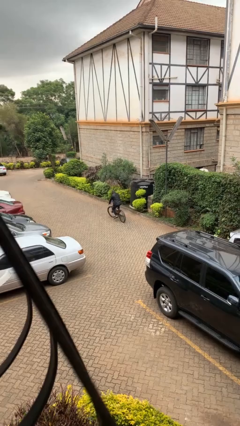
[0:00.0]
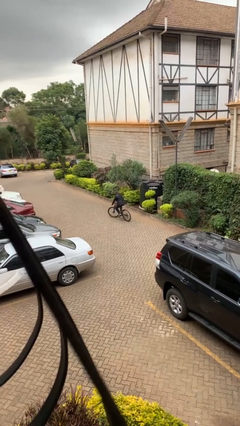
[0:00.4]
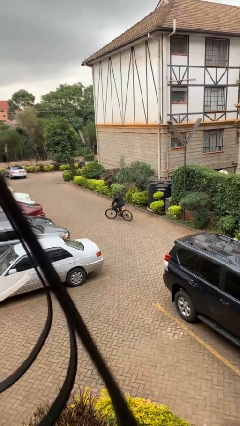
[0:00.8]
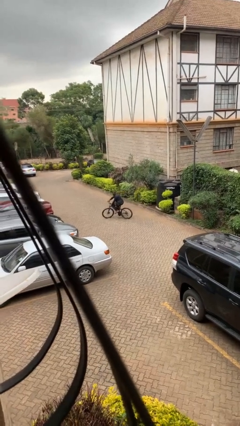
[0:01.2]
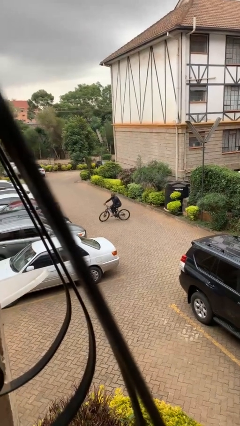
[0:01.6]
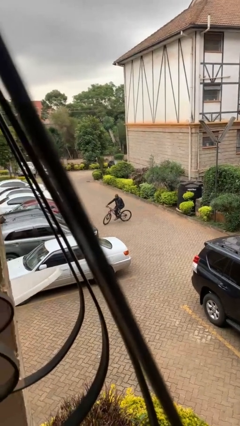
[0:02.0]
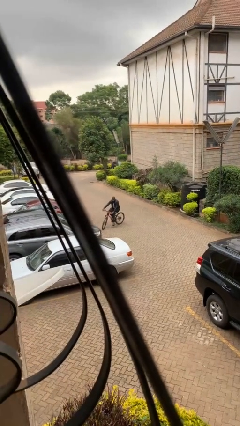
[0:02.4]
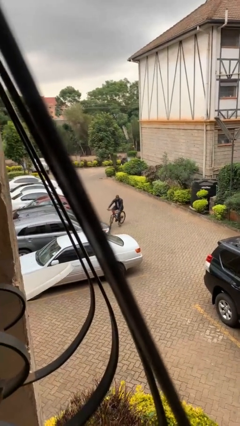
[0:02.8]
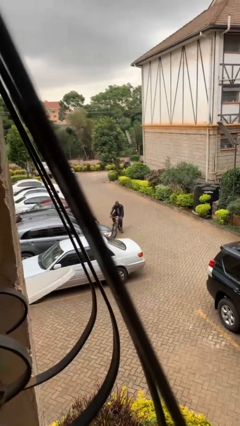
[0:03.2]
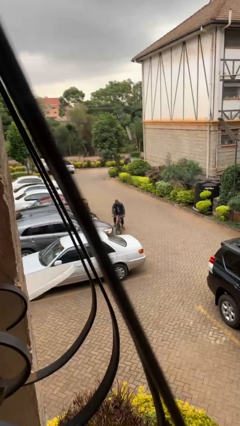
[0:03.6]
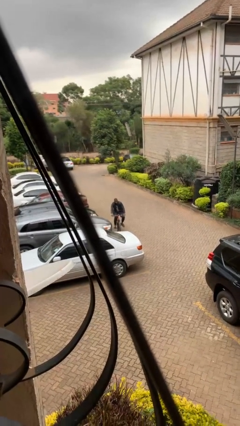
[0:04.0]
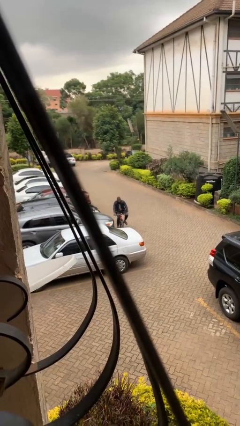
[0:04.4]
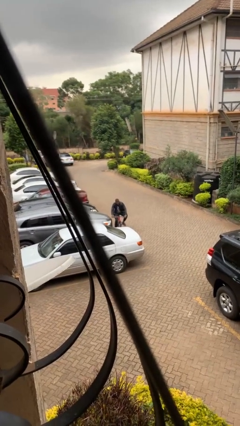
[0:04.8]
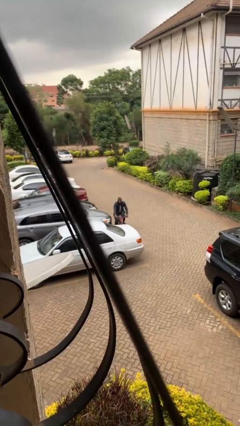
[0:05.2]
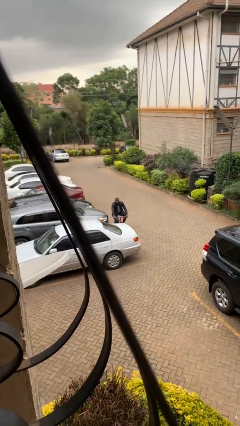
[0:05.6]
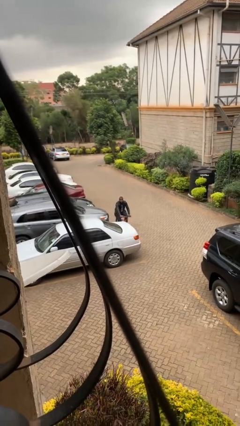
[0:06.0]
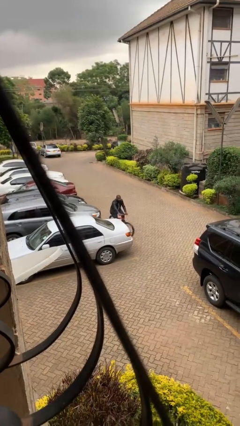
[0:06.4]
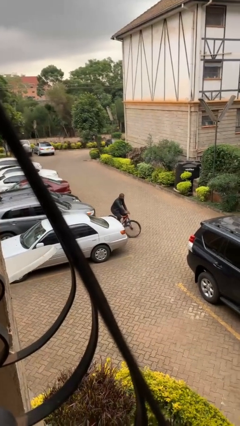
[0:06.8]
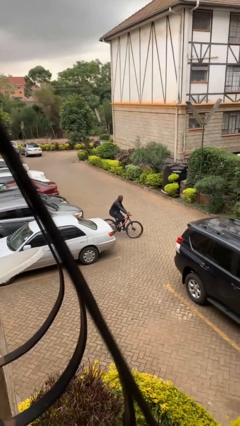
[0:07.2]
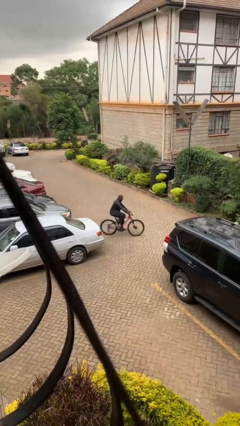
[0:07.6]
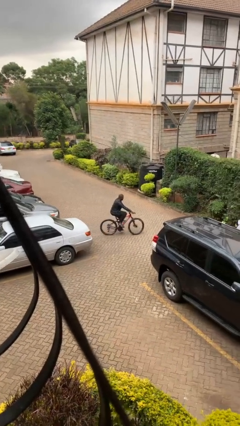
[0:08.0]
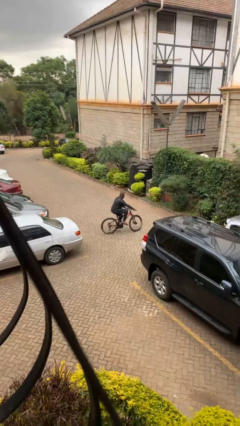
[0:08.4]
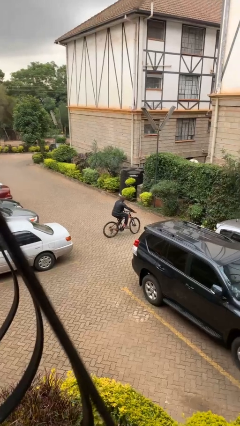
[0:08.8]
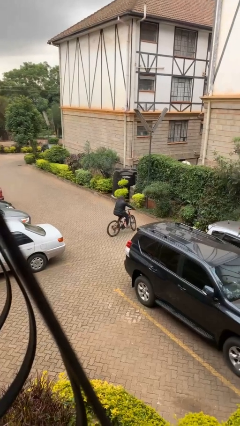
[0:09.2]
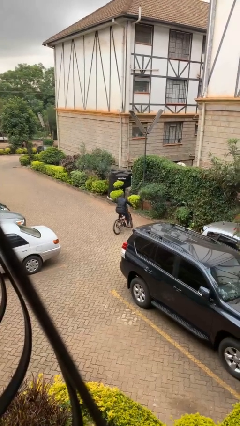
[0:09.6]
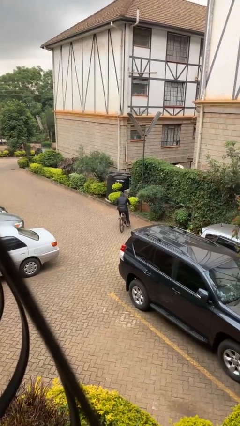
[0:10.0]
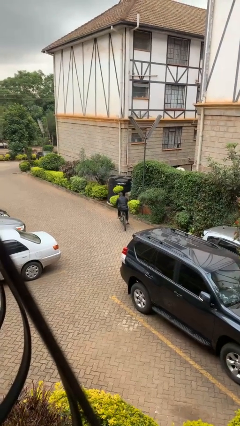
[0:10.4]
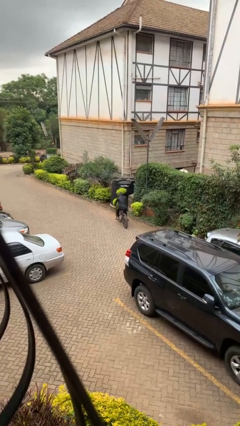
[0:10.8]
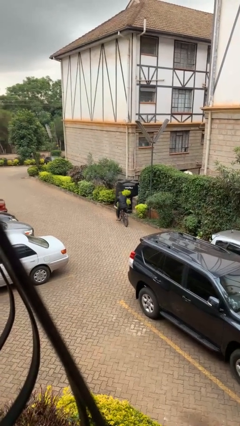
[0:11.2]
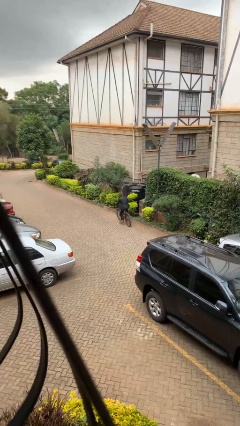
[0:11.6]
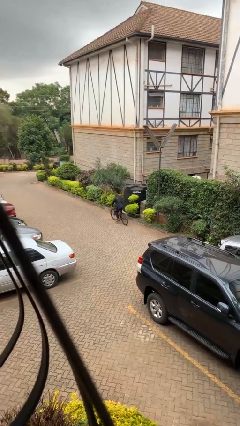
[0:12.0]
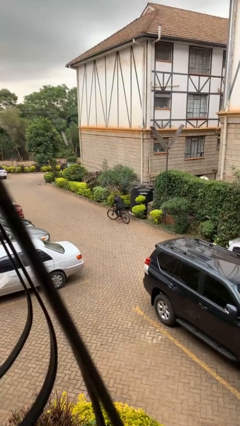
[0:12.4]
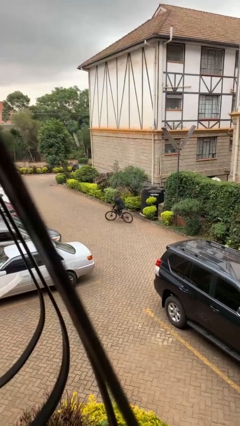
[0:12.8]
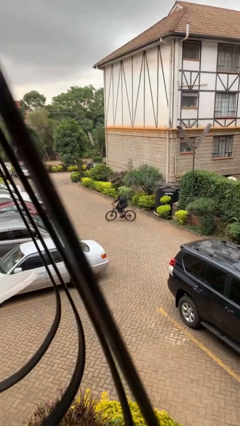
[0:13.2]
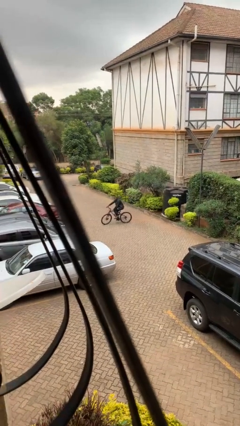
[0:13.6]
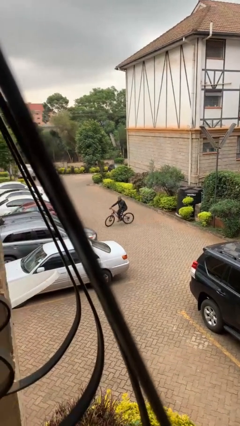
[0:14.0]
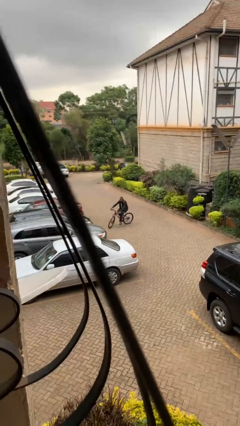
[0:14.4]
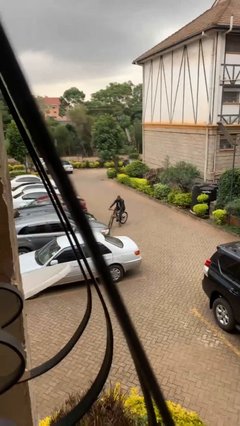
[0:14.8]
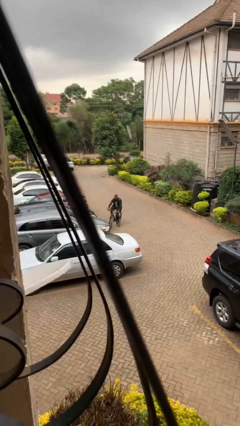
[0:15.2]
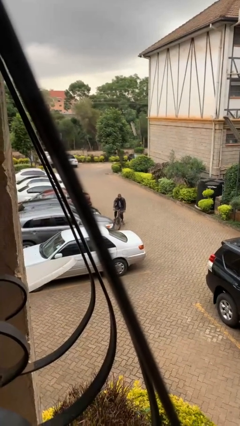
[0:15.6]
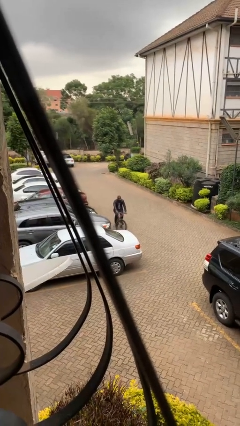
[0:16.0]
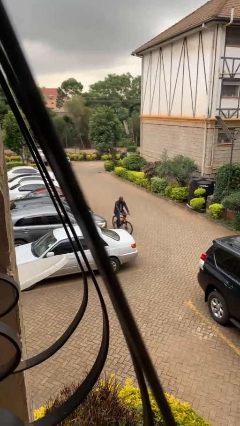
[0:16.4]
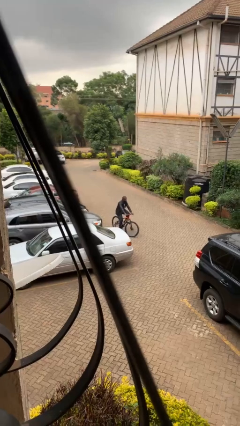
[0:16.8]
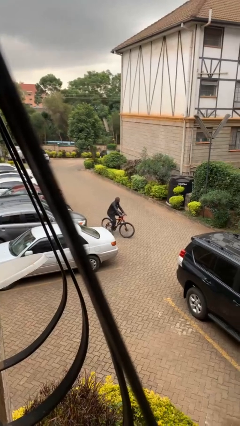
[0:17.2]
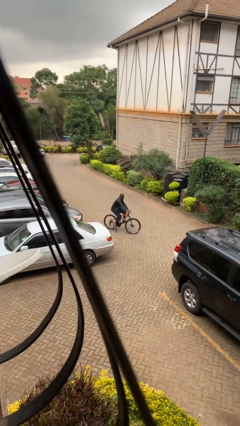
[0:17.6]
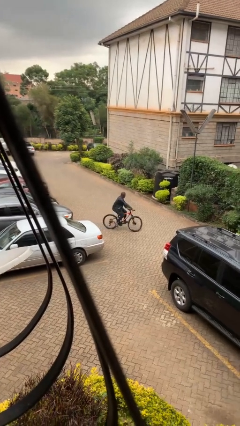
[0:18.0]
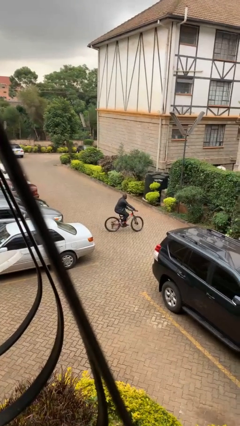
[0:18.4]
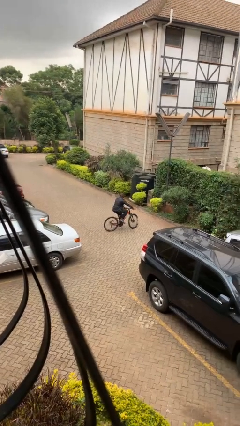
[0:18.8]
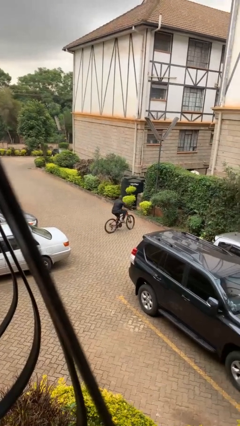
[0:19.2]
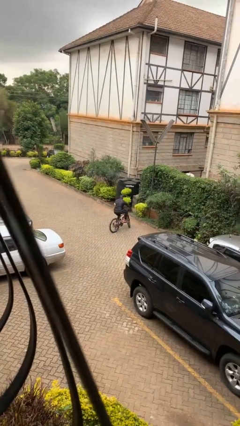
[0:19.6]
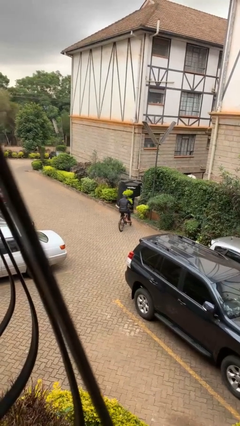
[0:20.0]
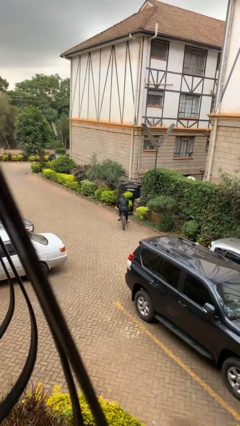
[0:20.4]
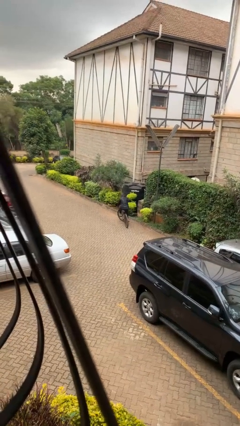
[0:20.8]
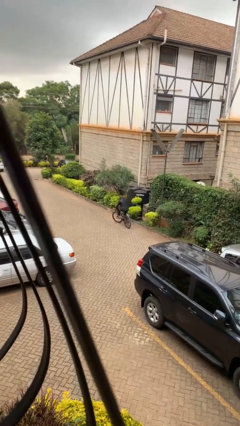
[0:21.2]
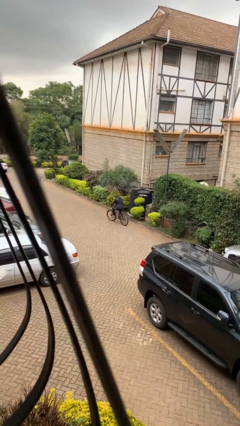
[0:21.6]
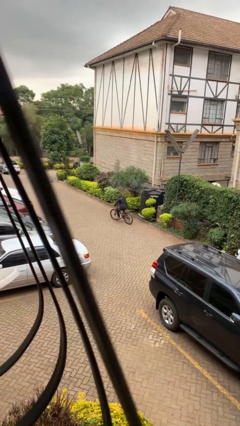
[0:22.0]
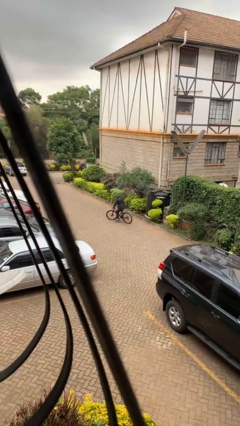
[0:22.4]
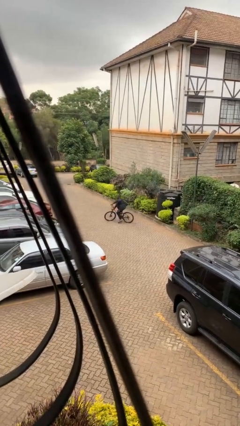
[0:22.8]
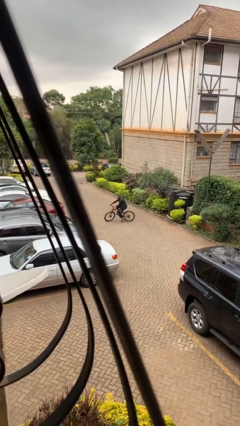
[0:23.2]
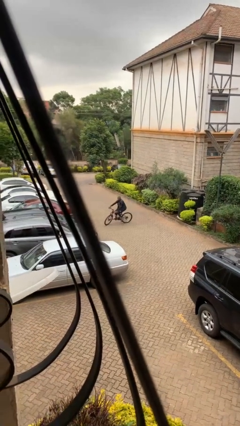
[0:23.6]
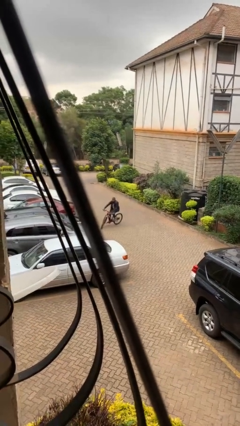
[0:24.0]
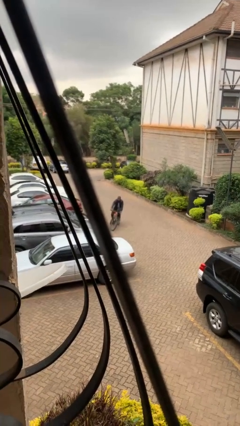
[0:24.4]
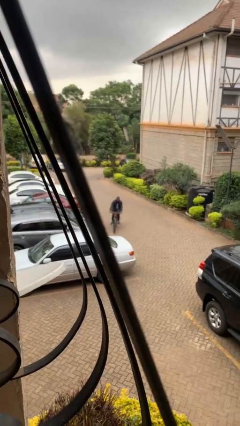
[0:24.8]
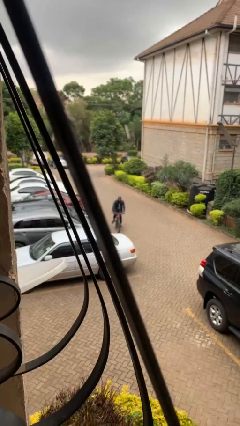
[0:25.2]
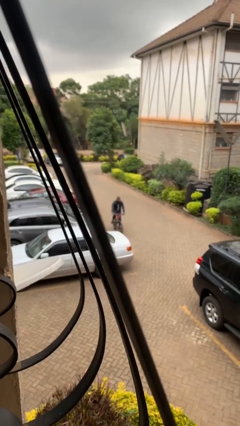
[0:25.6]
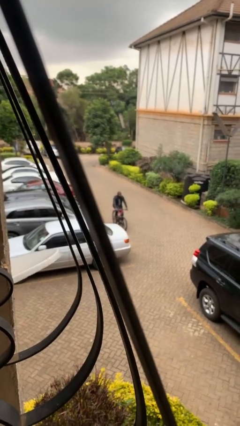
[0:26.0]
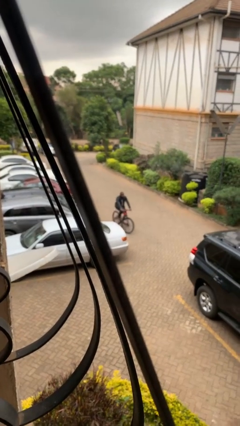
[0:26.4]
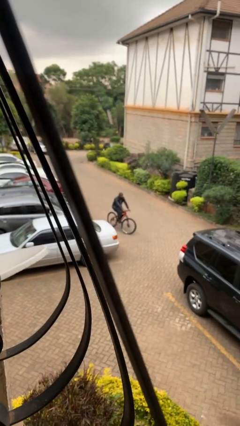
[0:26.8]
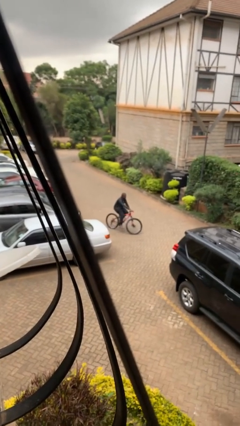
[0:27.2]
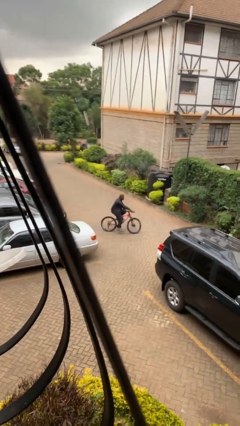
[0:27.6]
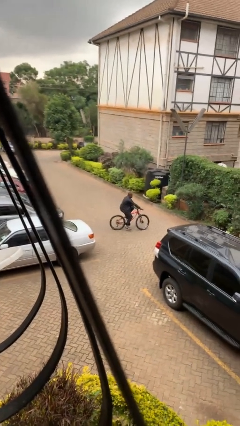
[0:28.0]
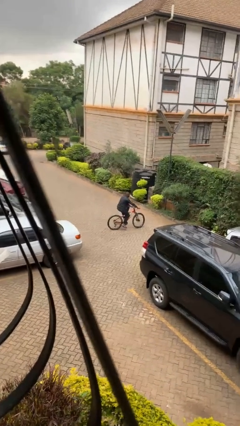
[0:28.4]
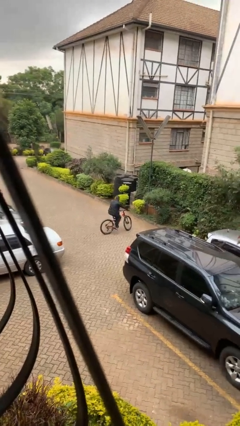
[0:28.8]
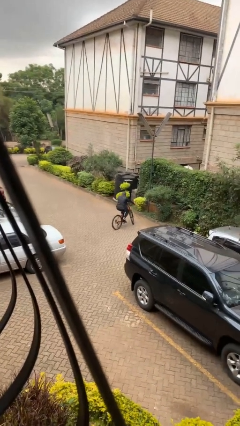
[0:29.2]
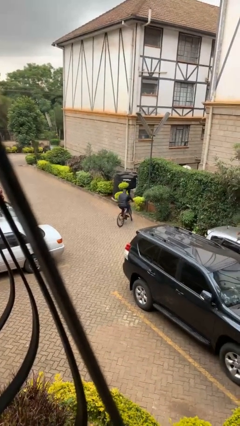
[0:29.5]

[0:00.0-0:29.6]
person rides bicycle

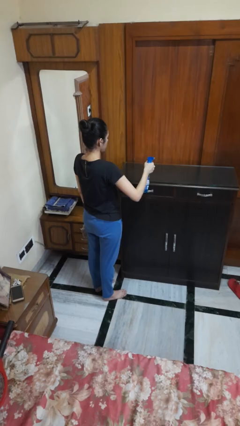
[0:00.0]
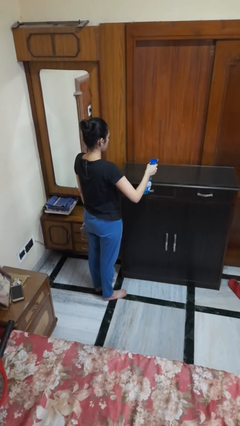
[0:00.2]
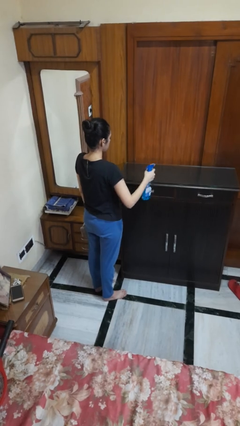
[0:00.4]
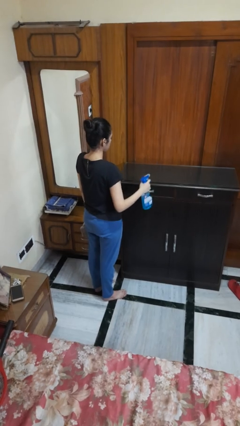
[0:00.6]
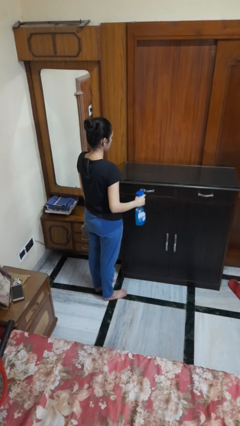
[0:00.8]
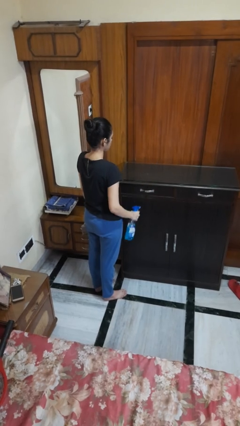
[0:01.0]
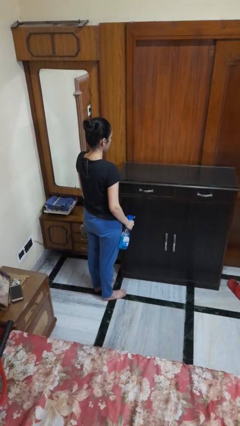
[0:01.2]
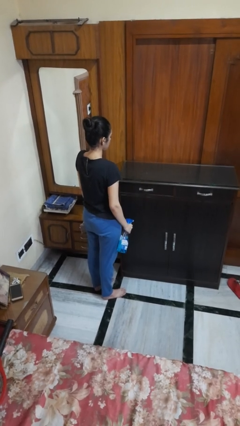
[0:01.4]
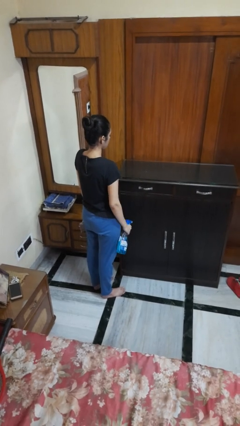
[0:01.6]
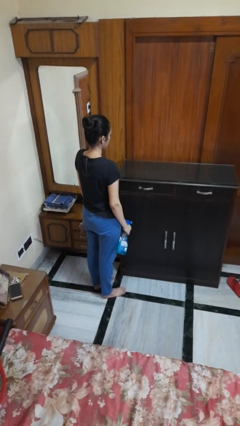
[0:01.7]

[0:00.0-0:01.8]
person sprays from bottle

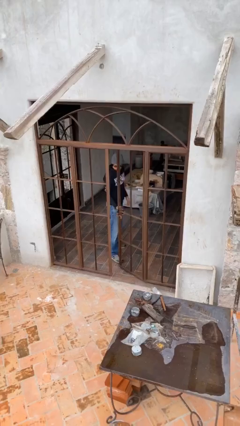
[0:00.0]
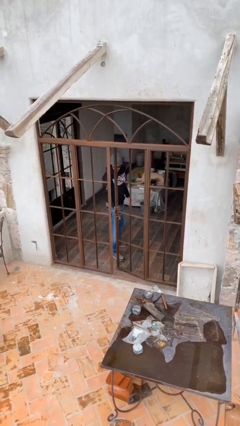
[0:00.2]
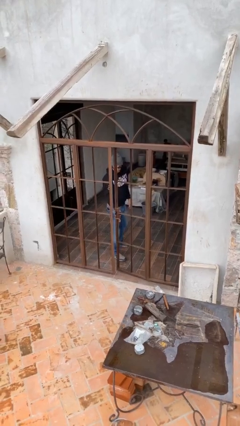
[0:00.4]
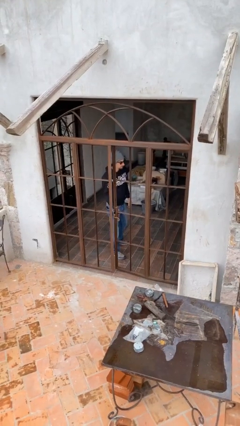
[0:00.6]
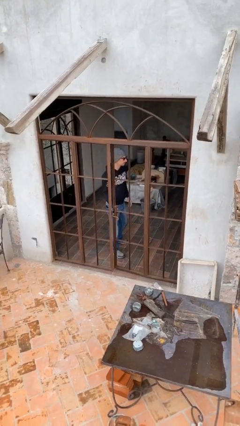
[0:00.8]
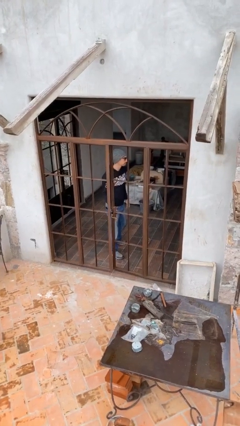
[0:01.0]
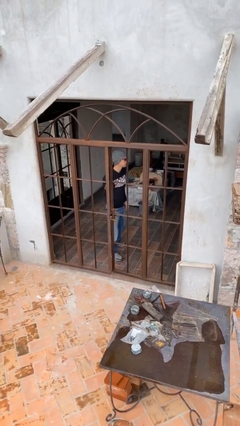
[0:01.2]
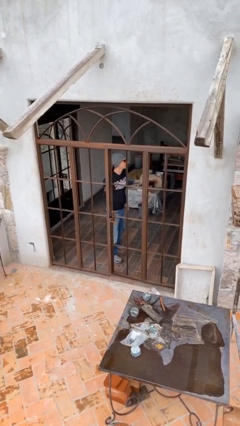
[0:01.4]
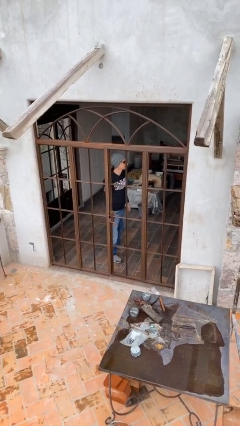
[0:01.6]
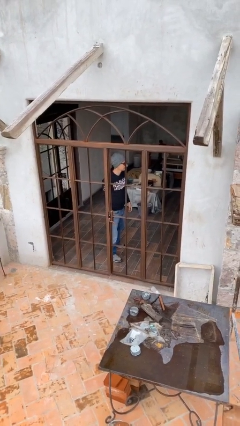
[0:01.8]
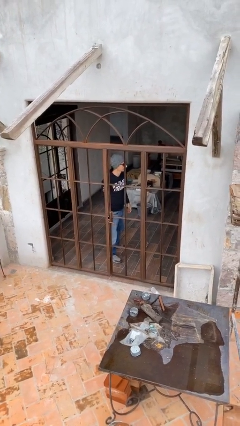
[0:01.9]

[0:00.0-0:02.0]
person closes facility door
